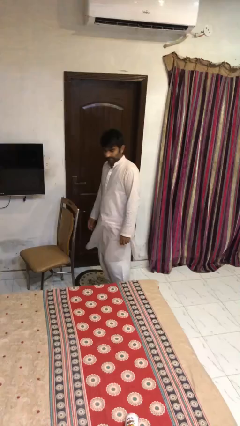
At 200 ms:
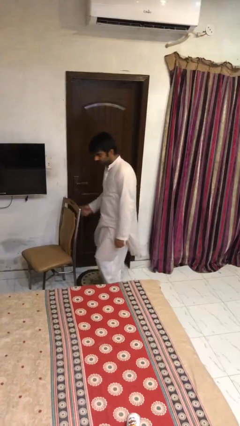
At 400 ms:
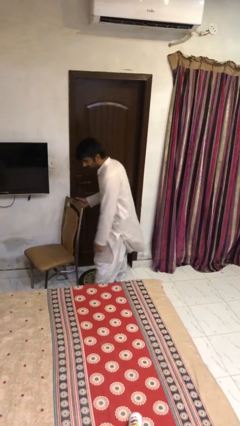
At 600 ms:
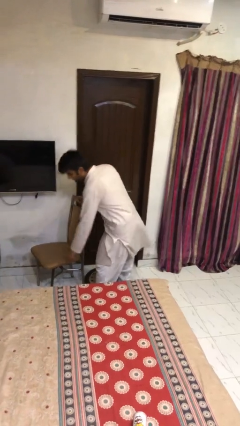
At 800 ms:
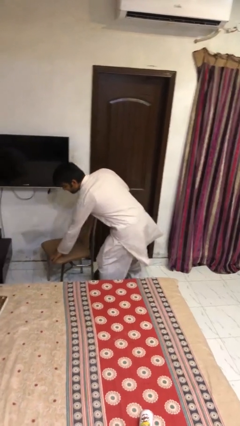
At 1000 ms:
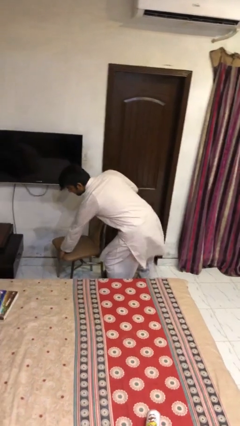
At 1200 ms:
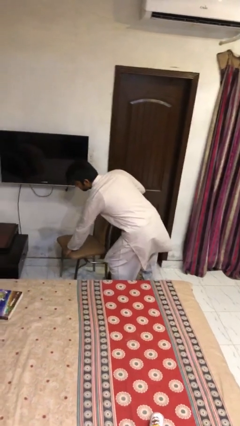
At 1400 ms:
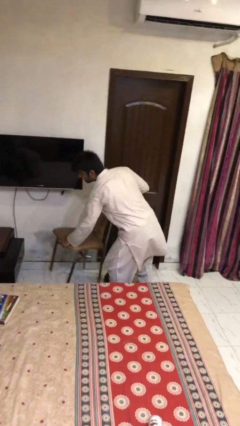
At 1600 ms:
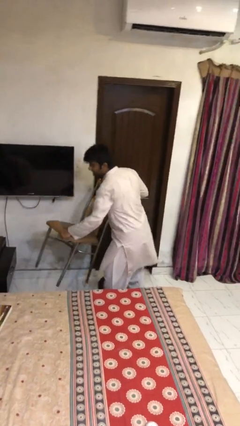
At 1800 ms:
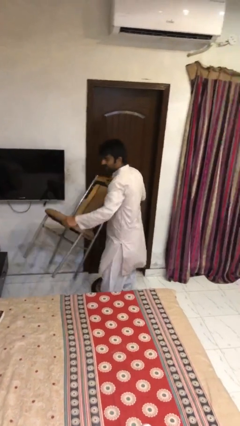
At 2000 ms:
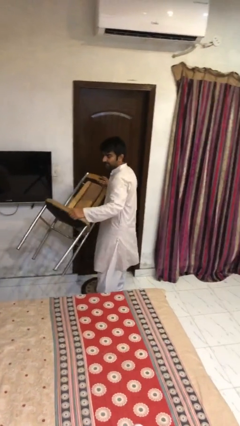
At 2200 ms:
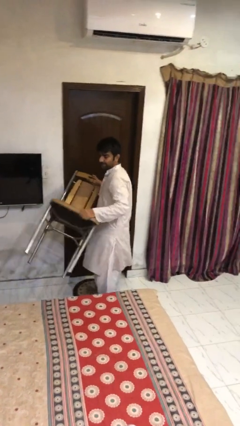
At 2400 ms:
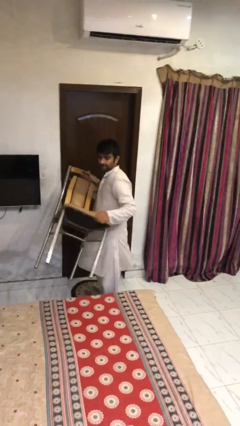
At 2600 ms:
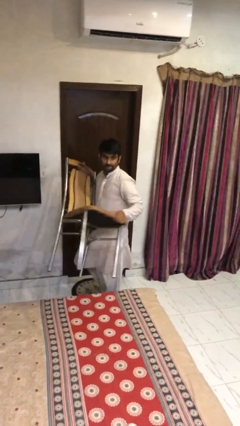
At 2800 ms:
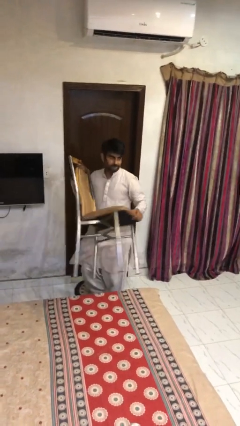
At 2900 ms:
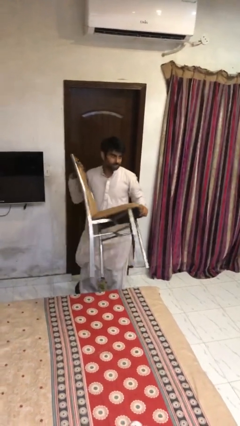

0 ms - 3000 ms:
person picks up object from floor

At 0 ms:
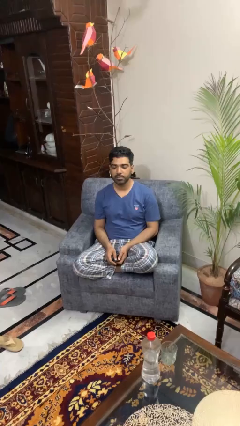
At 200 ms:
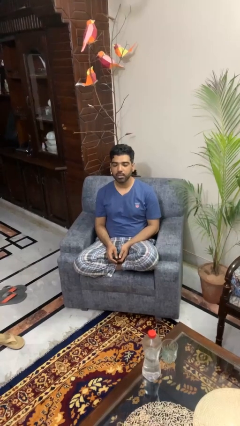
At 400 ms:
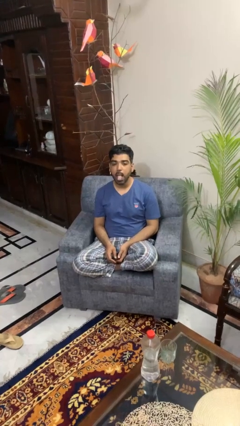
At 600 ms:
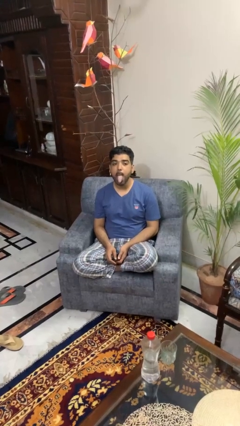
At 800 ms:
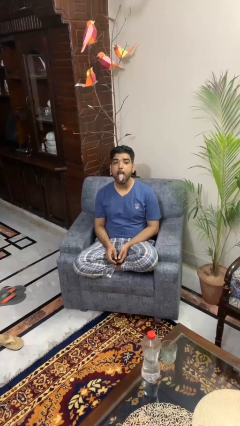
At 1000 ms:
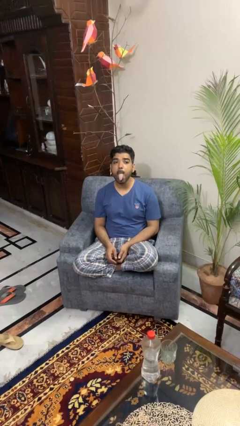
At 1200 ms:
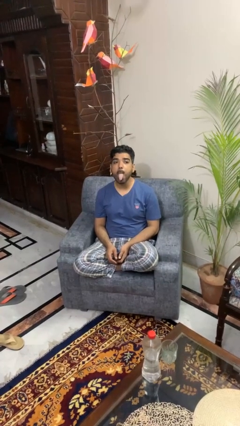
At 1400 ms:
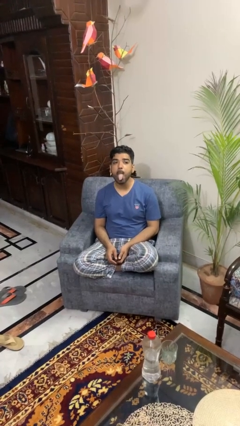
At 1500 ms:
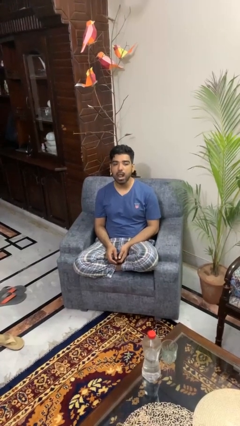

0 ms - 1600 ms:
person sticks out tongue

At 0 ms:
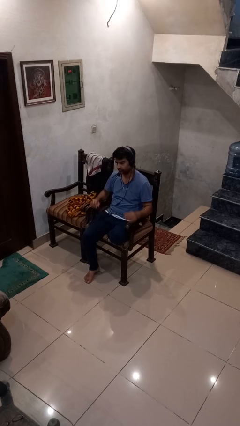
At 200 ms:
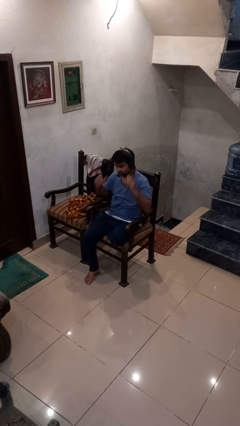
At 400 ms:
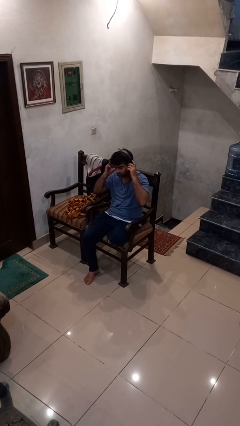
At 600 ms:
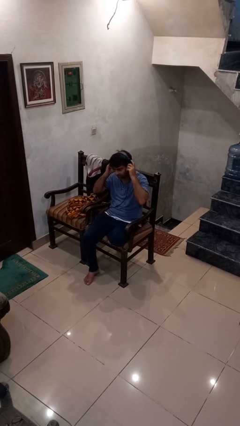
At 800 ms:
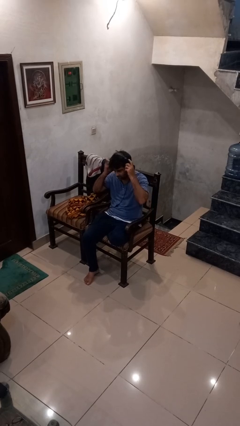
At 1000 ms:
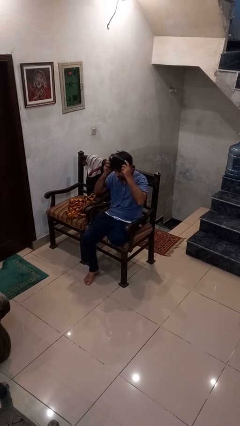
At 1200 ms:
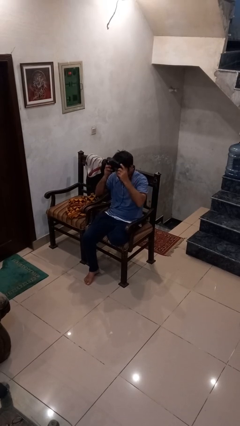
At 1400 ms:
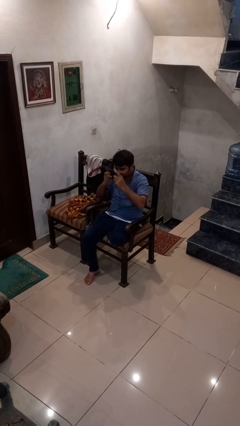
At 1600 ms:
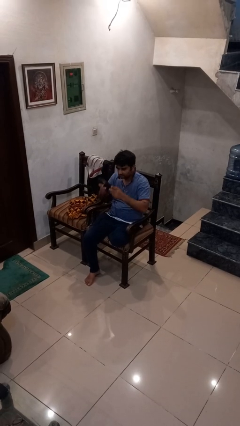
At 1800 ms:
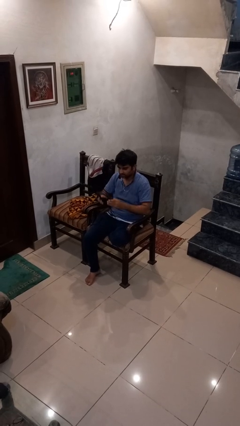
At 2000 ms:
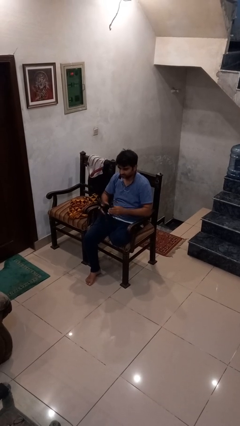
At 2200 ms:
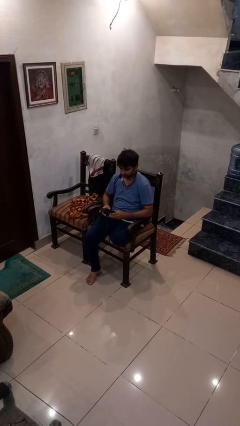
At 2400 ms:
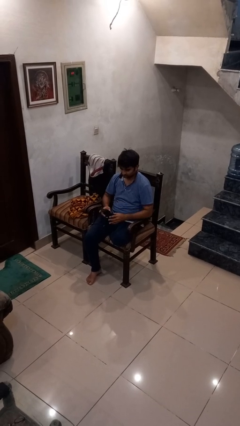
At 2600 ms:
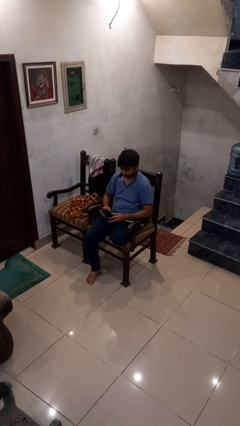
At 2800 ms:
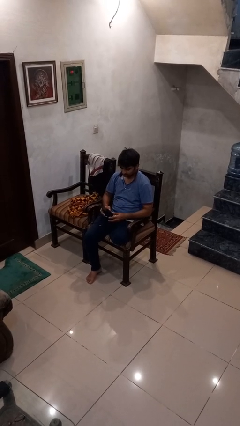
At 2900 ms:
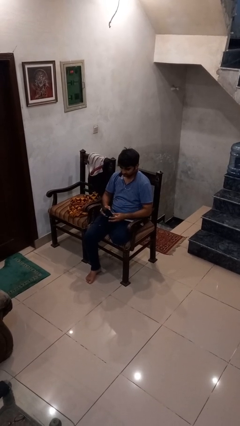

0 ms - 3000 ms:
person takes off headphones

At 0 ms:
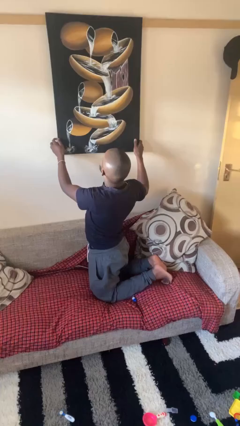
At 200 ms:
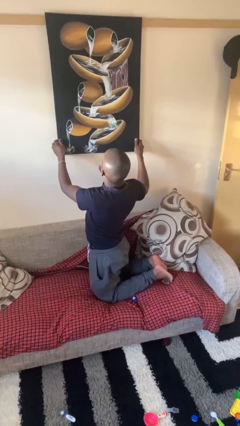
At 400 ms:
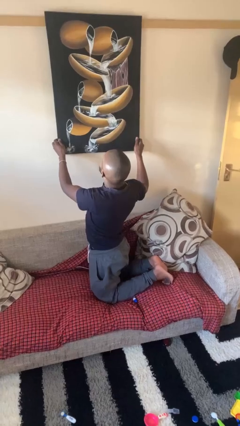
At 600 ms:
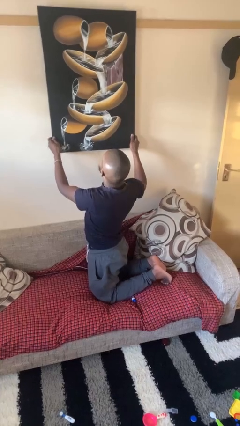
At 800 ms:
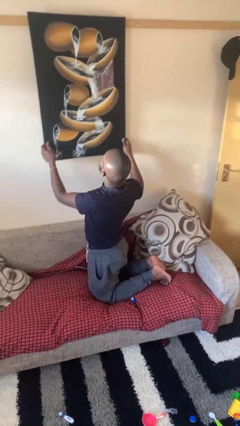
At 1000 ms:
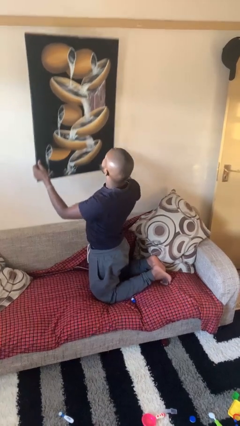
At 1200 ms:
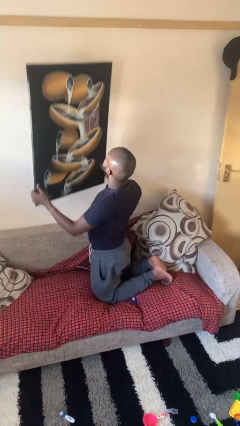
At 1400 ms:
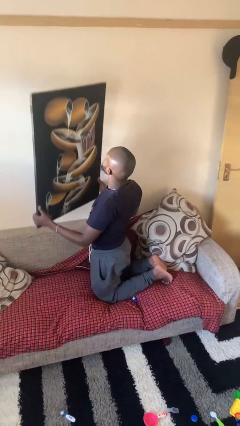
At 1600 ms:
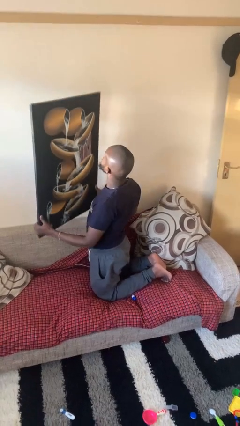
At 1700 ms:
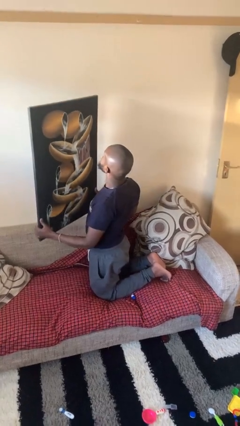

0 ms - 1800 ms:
person takes down picture frame

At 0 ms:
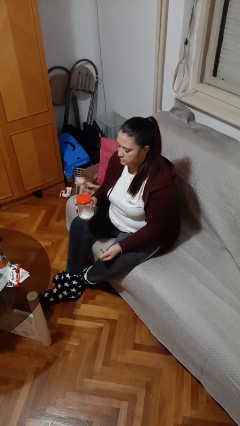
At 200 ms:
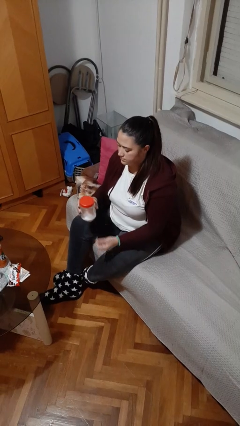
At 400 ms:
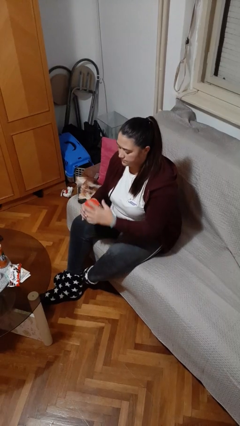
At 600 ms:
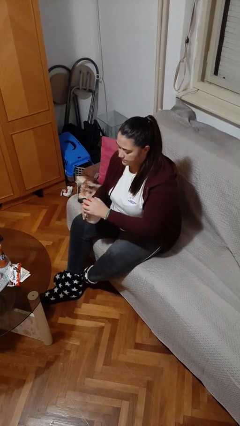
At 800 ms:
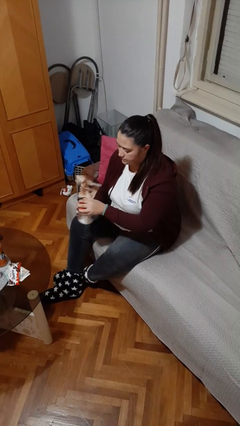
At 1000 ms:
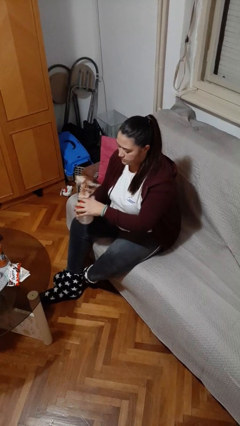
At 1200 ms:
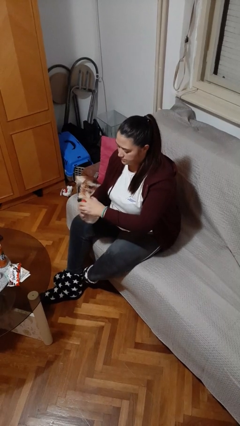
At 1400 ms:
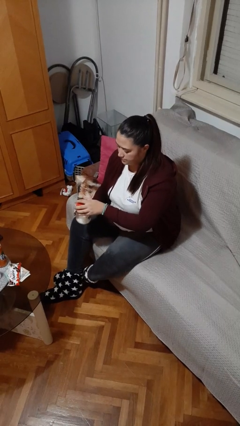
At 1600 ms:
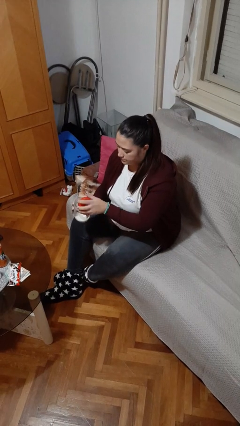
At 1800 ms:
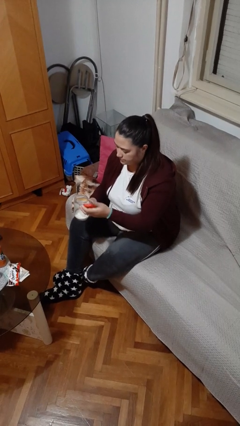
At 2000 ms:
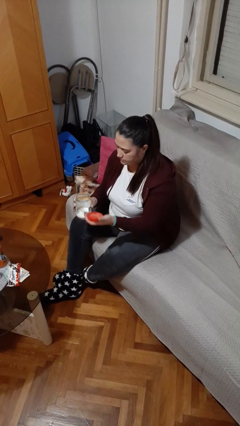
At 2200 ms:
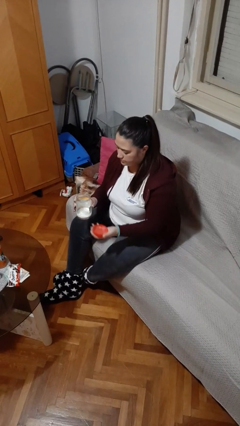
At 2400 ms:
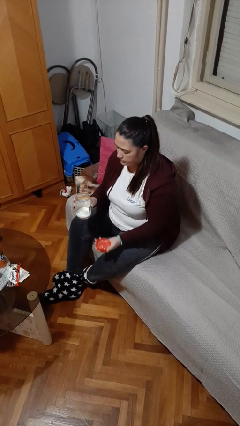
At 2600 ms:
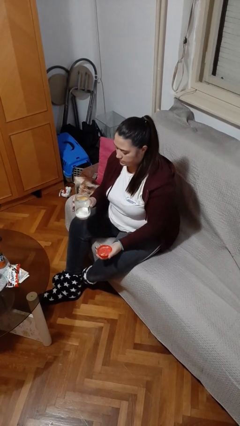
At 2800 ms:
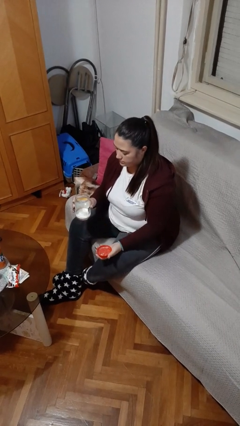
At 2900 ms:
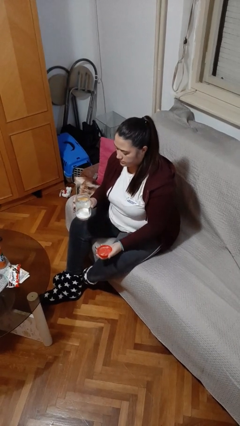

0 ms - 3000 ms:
person opens jar

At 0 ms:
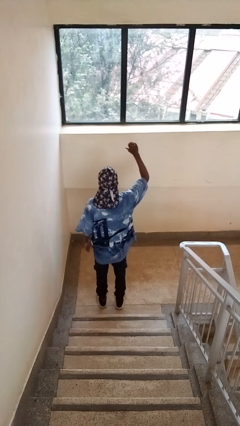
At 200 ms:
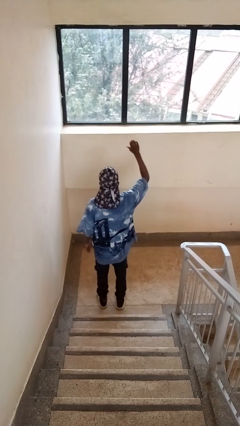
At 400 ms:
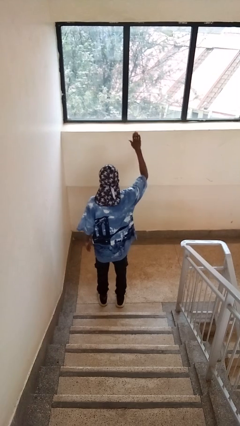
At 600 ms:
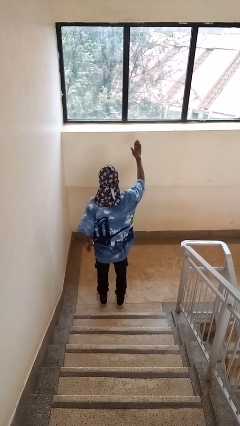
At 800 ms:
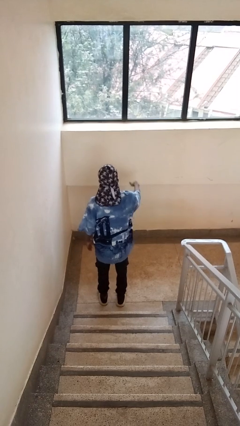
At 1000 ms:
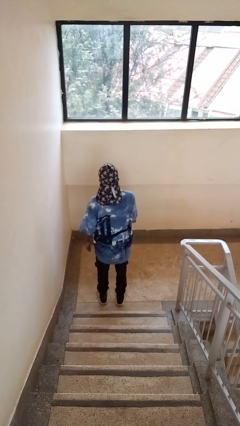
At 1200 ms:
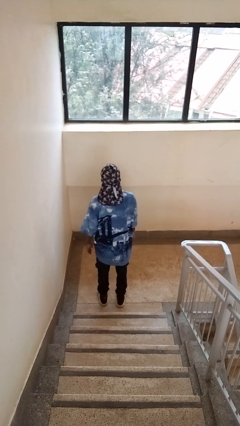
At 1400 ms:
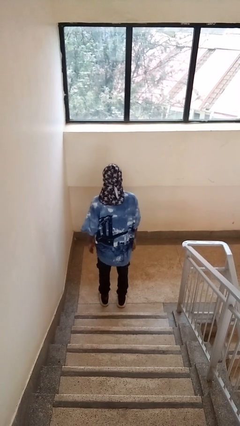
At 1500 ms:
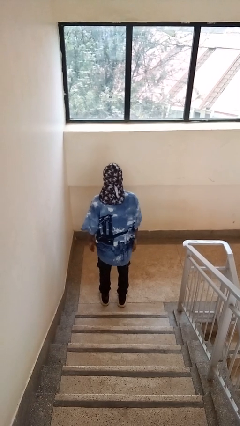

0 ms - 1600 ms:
person gestures swipe down

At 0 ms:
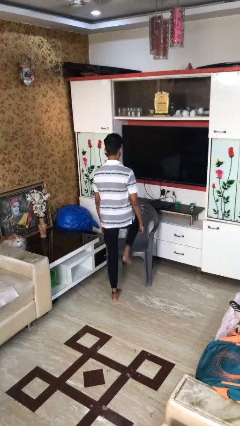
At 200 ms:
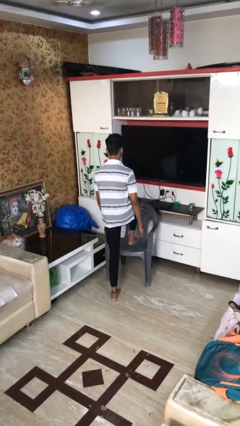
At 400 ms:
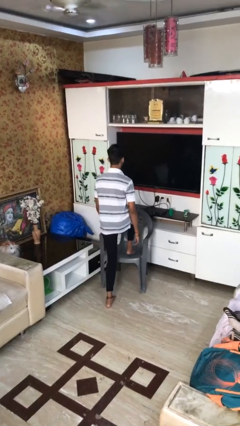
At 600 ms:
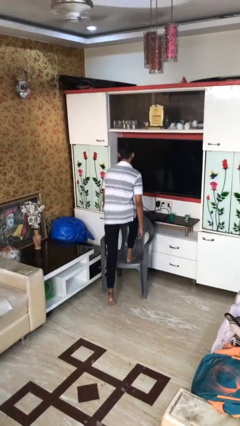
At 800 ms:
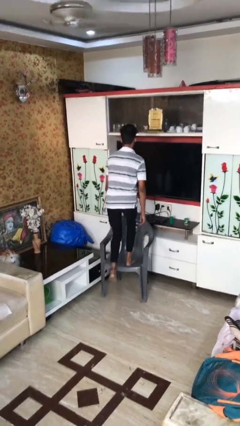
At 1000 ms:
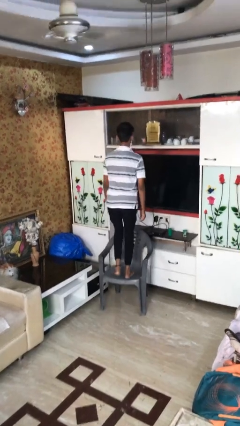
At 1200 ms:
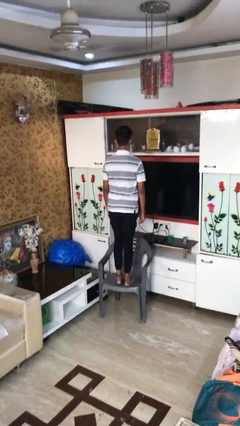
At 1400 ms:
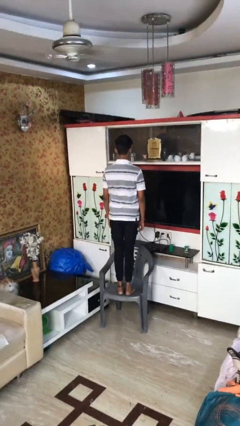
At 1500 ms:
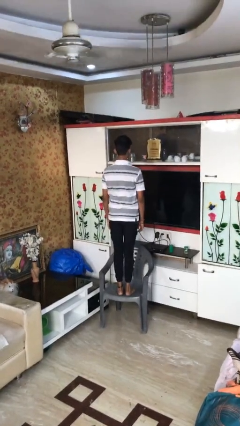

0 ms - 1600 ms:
person climbs on chair

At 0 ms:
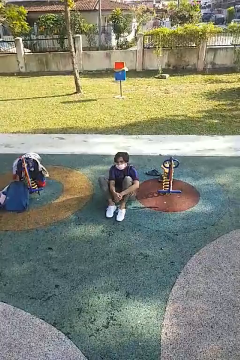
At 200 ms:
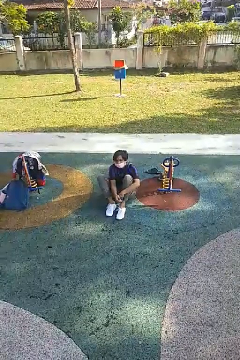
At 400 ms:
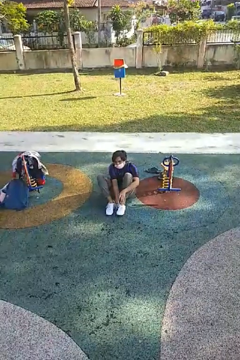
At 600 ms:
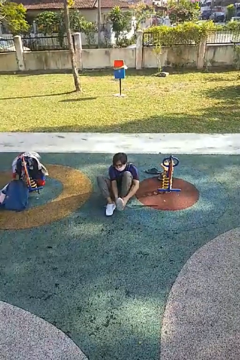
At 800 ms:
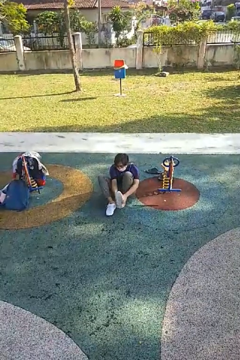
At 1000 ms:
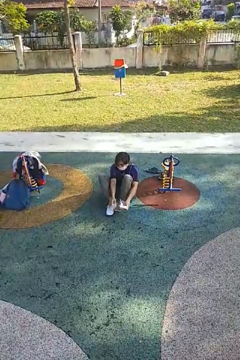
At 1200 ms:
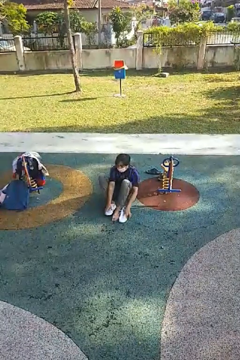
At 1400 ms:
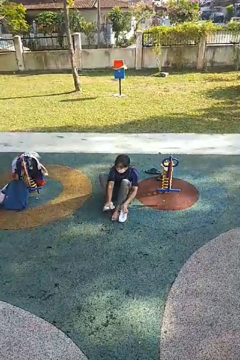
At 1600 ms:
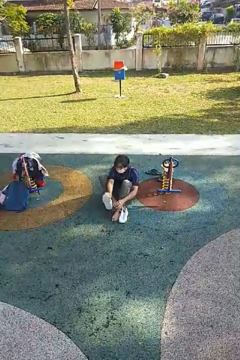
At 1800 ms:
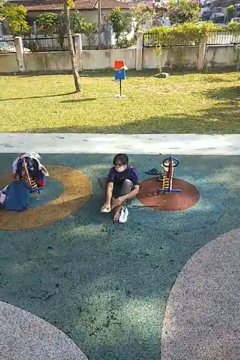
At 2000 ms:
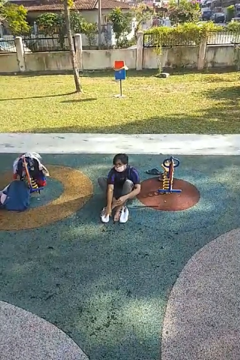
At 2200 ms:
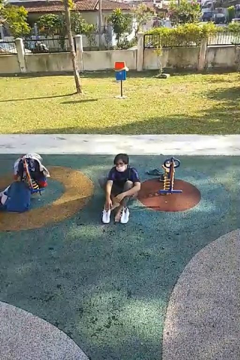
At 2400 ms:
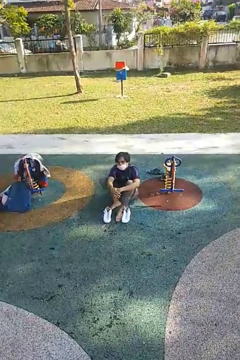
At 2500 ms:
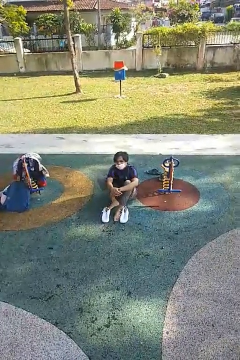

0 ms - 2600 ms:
person takes off shoes
